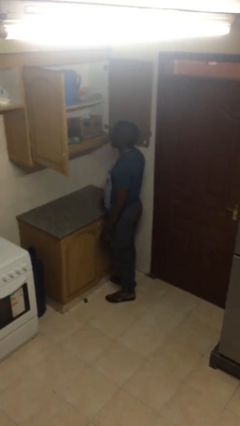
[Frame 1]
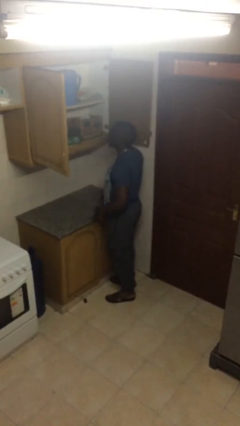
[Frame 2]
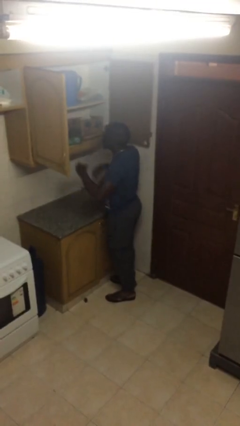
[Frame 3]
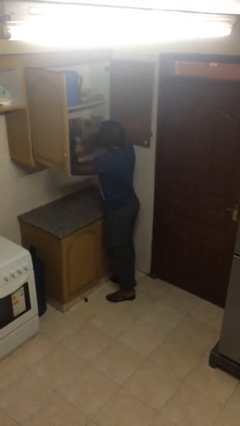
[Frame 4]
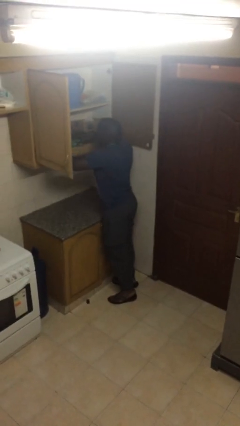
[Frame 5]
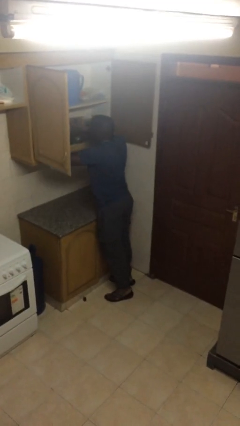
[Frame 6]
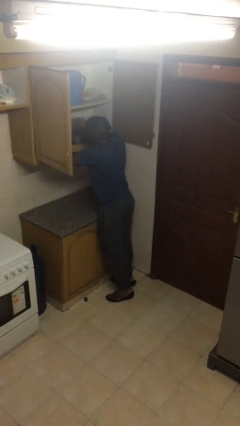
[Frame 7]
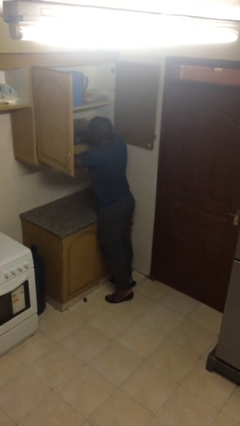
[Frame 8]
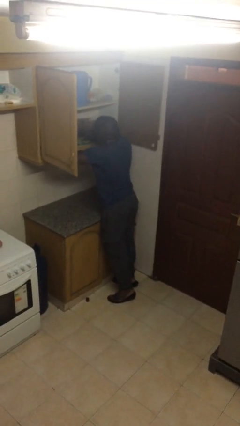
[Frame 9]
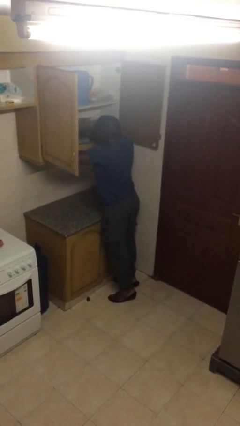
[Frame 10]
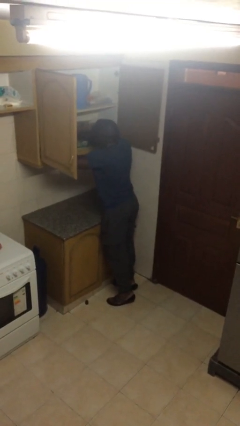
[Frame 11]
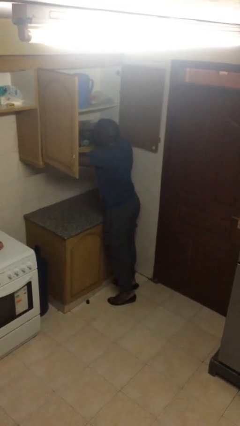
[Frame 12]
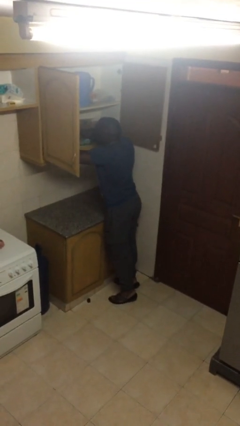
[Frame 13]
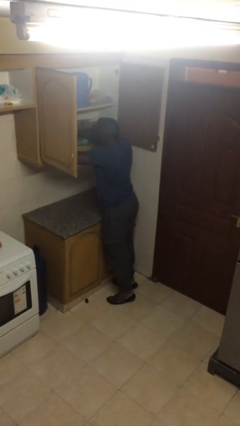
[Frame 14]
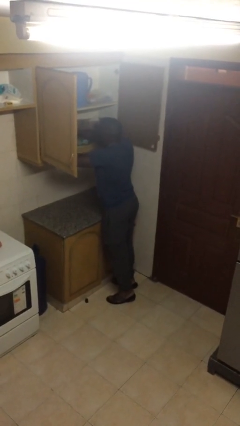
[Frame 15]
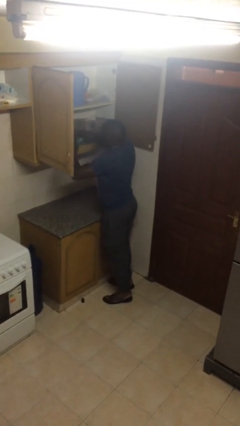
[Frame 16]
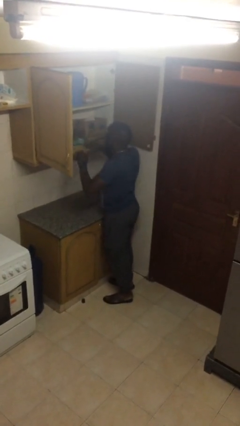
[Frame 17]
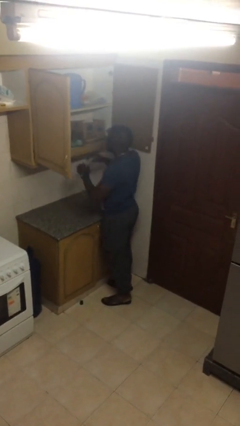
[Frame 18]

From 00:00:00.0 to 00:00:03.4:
person searches in cabinet

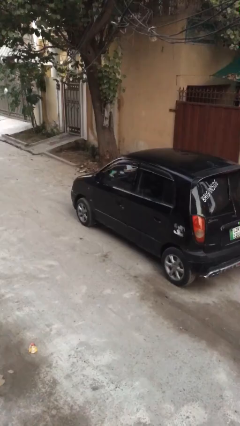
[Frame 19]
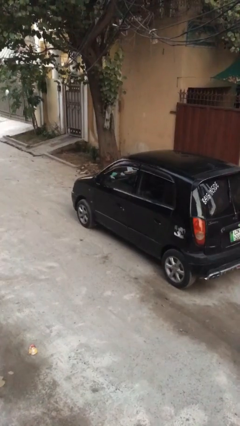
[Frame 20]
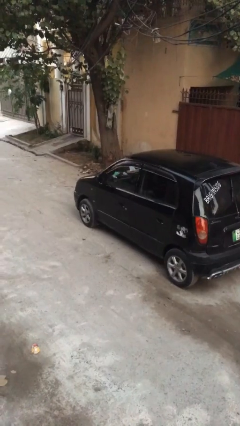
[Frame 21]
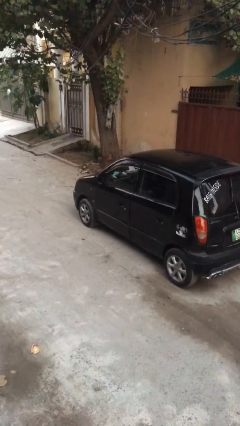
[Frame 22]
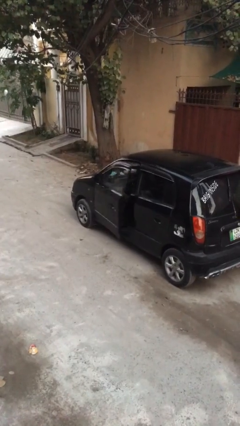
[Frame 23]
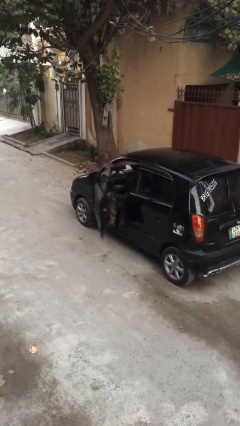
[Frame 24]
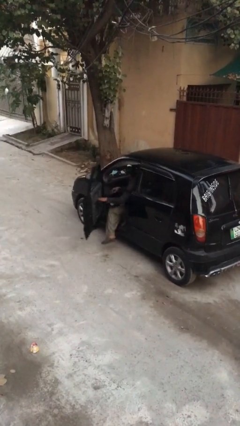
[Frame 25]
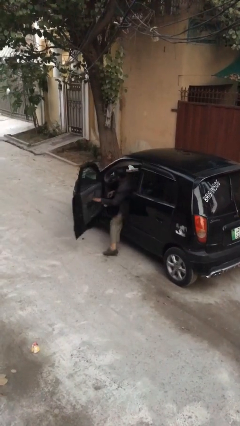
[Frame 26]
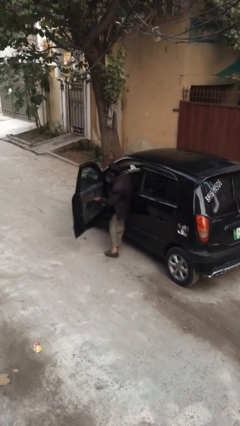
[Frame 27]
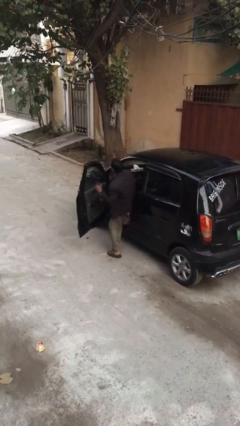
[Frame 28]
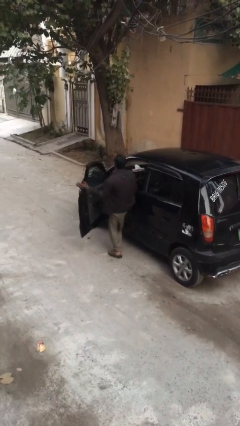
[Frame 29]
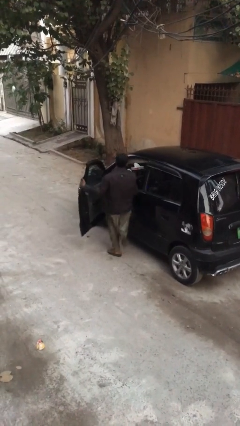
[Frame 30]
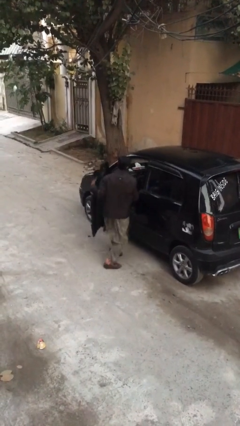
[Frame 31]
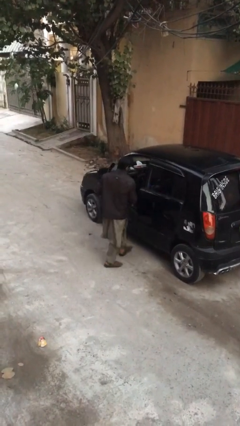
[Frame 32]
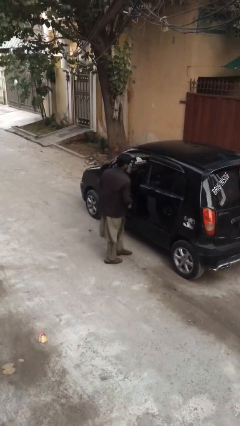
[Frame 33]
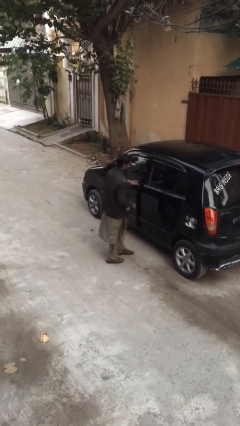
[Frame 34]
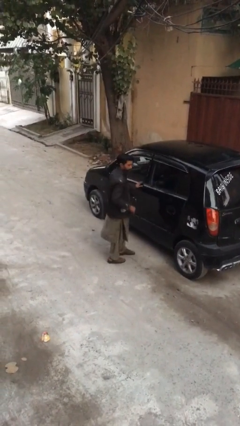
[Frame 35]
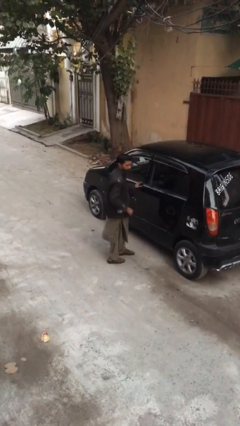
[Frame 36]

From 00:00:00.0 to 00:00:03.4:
car drops off person

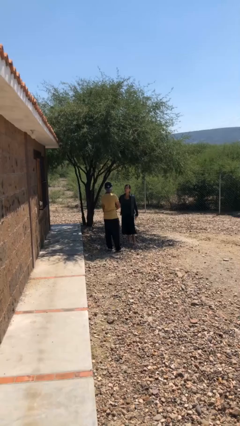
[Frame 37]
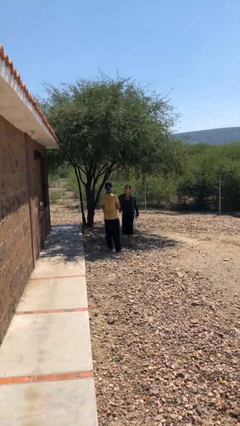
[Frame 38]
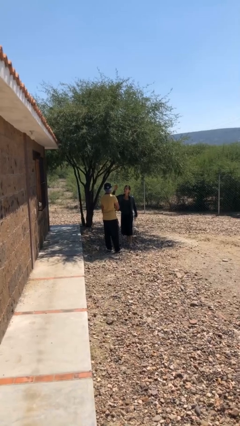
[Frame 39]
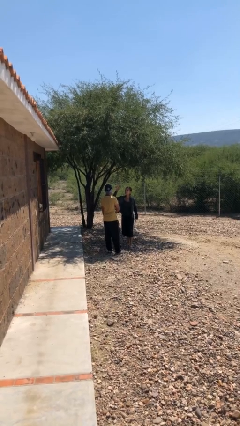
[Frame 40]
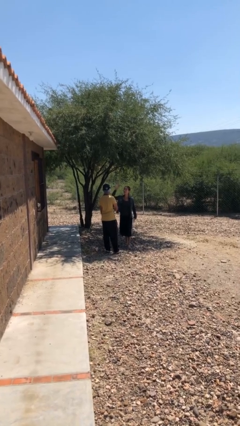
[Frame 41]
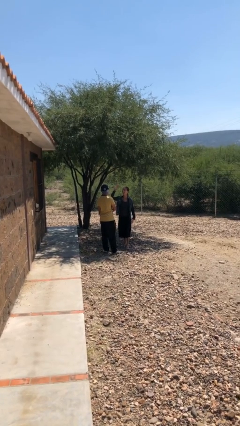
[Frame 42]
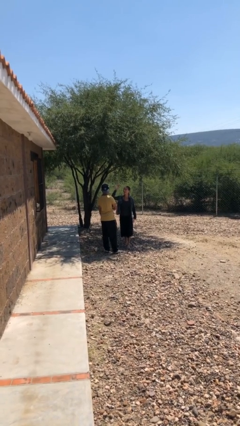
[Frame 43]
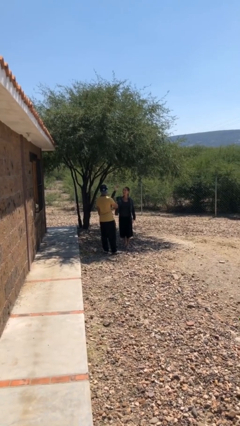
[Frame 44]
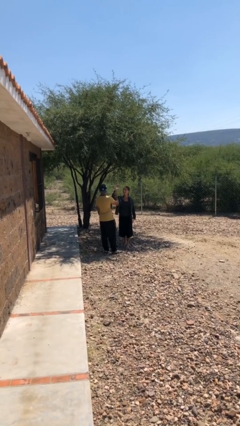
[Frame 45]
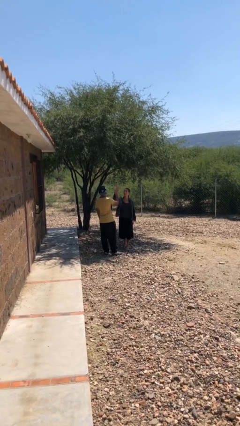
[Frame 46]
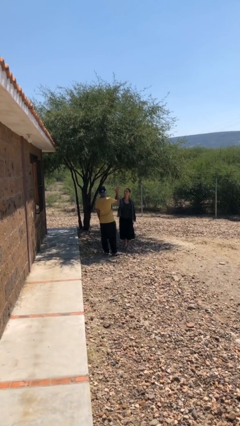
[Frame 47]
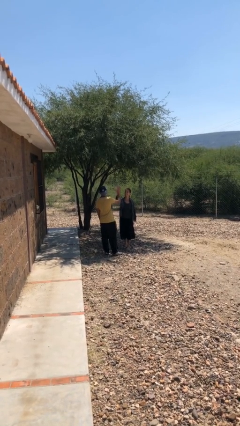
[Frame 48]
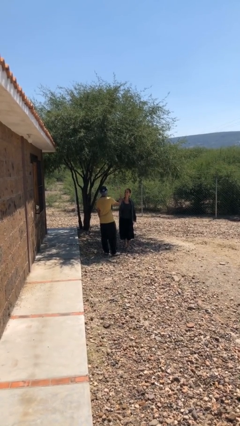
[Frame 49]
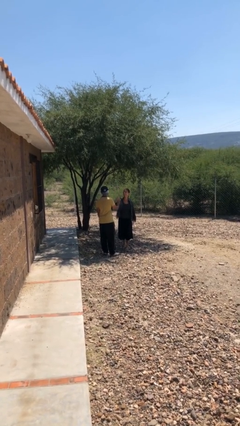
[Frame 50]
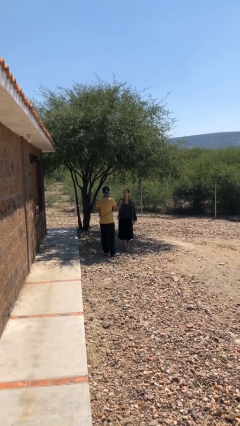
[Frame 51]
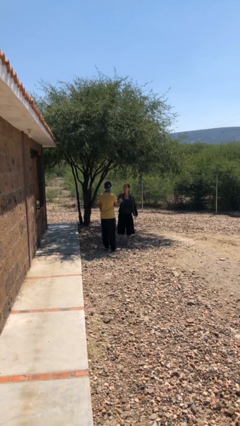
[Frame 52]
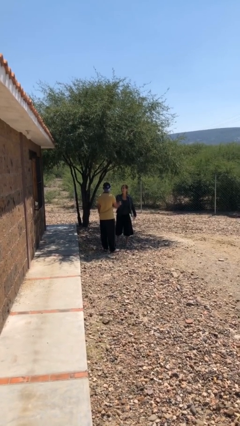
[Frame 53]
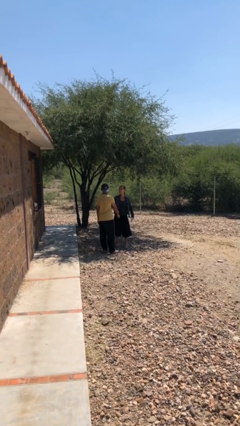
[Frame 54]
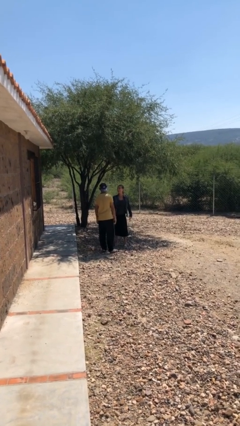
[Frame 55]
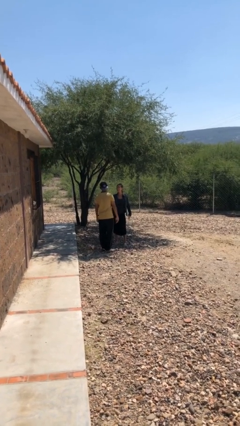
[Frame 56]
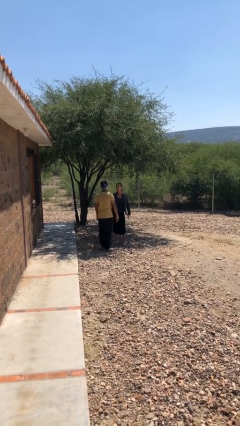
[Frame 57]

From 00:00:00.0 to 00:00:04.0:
person highfives hand

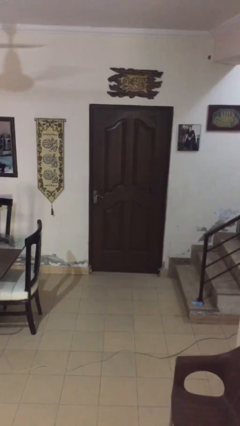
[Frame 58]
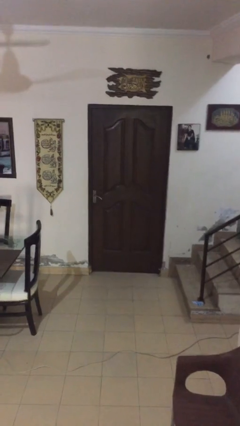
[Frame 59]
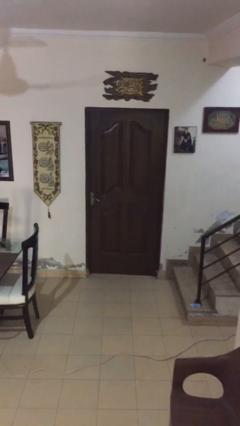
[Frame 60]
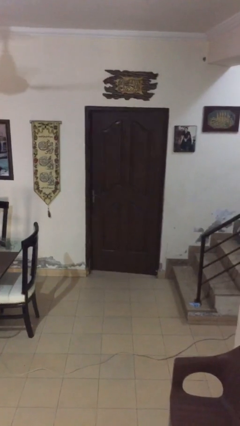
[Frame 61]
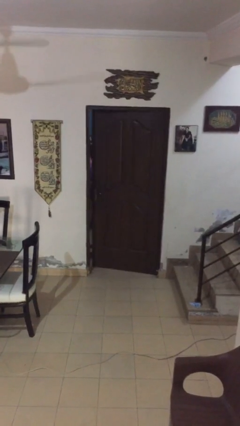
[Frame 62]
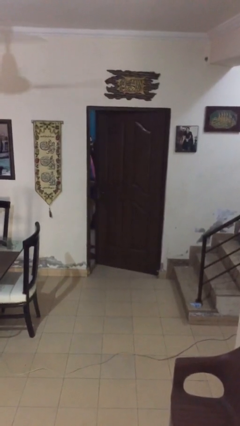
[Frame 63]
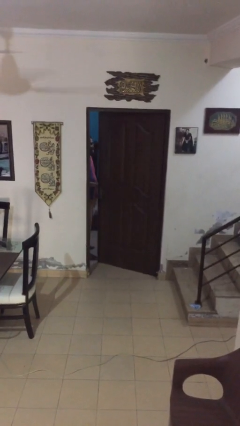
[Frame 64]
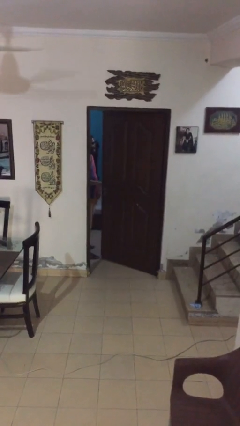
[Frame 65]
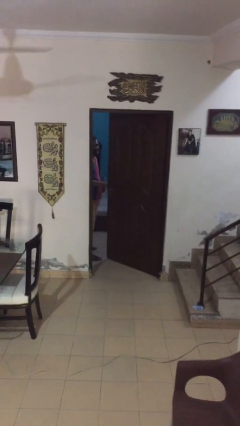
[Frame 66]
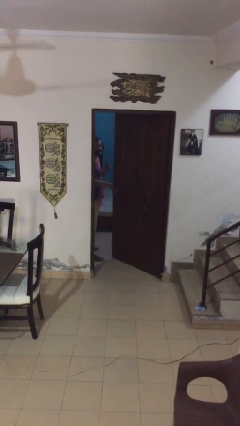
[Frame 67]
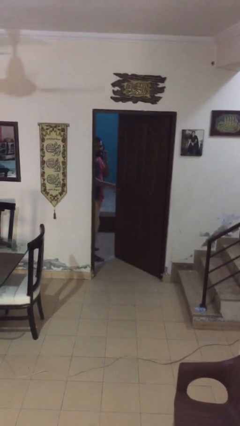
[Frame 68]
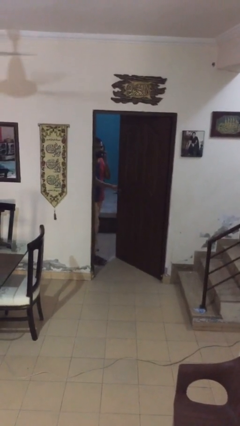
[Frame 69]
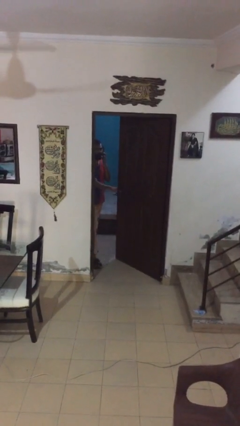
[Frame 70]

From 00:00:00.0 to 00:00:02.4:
person opens facility door

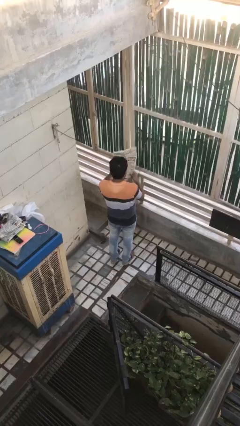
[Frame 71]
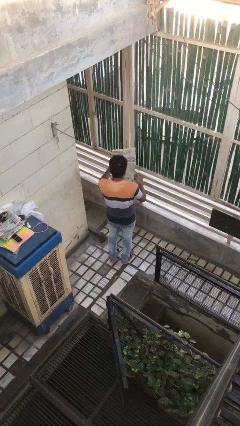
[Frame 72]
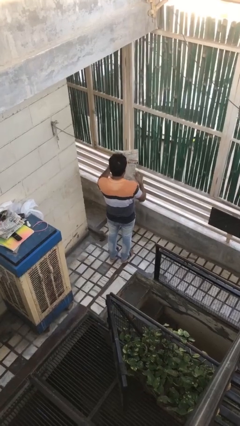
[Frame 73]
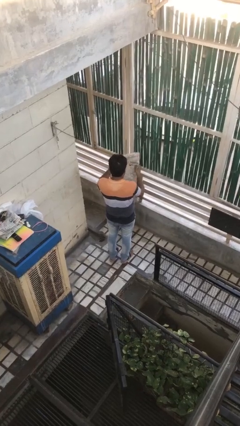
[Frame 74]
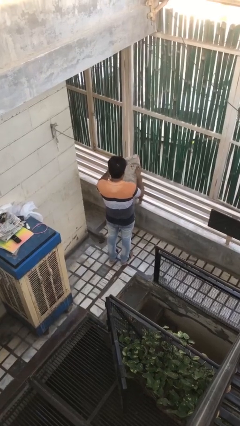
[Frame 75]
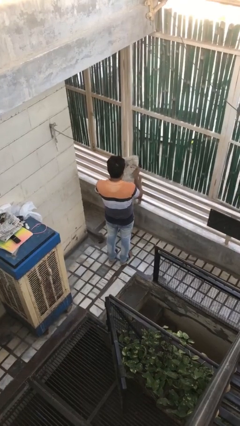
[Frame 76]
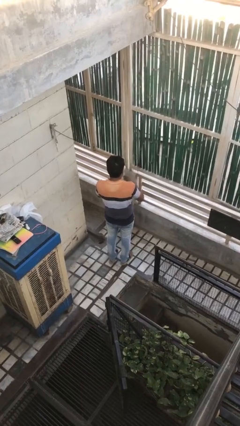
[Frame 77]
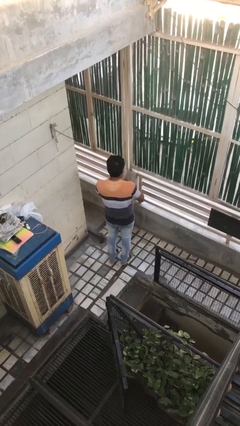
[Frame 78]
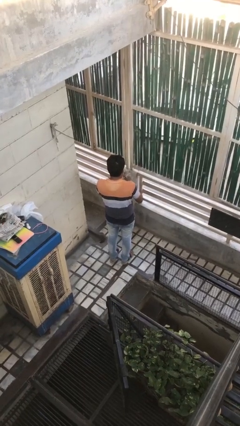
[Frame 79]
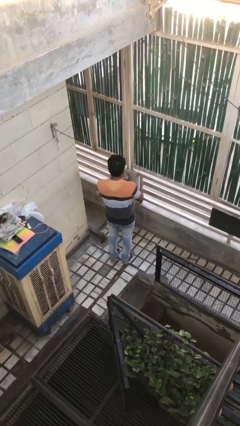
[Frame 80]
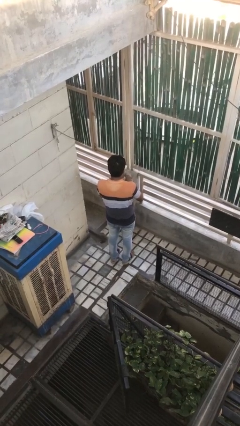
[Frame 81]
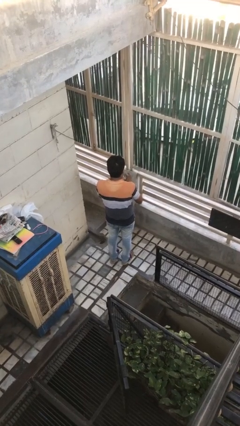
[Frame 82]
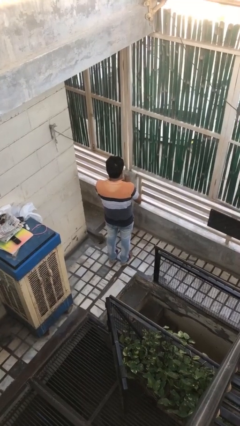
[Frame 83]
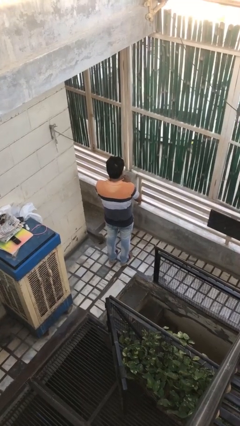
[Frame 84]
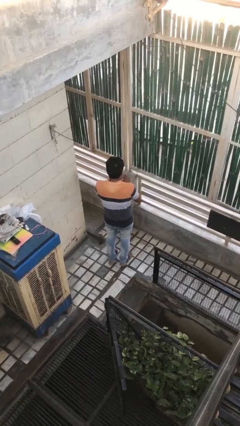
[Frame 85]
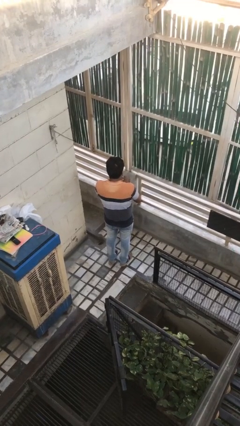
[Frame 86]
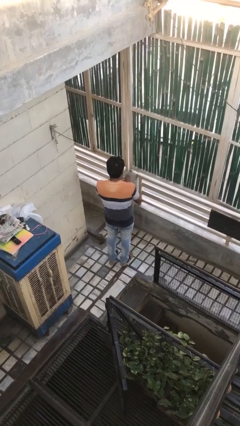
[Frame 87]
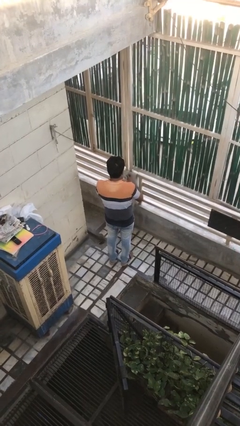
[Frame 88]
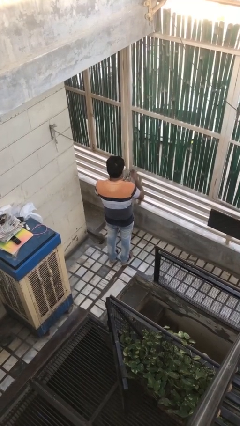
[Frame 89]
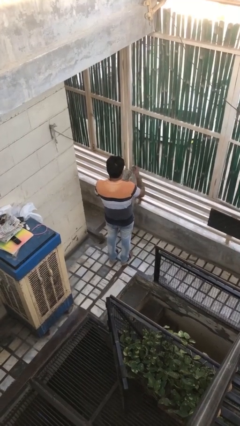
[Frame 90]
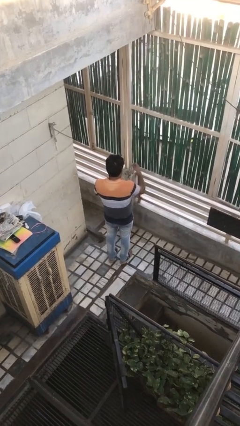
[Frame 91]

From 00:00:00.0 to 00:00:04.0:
person crumples paper

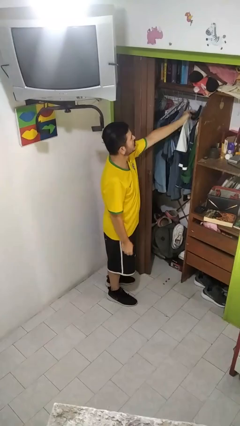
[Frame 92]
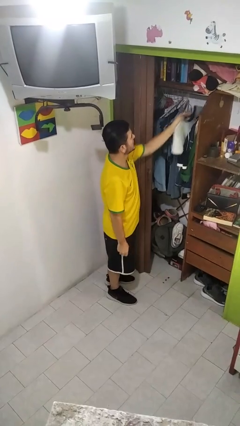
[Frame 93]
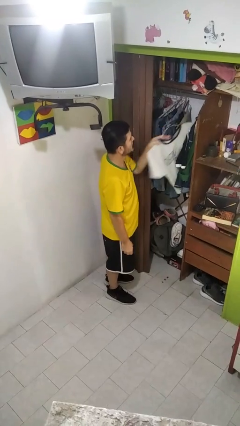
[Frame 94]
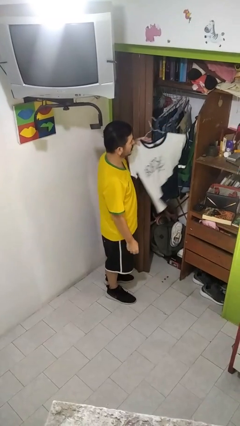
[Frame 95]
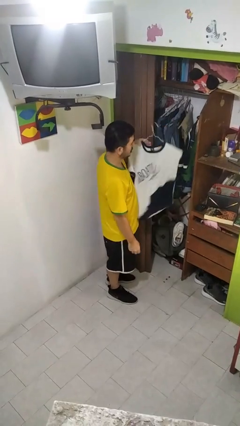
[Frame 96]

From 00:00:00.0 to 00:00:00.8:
person takes clothes from closet
